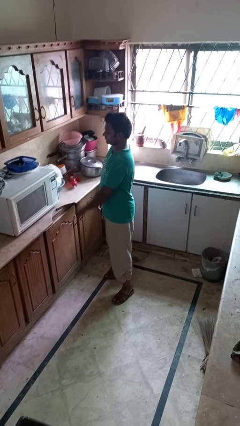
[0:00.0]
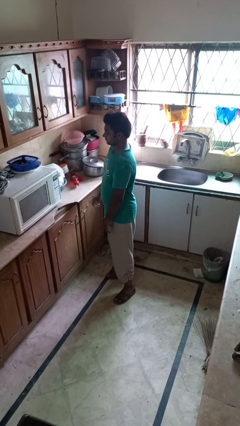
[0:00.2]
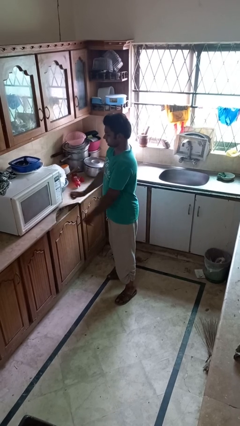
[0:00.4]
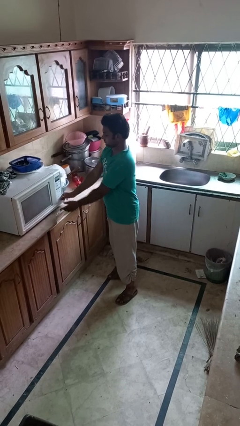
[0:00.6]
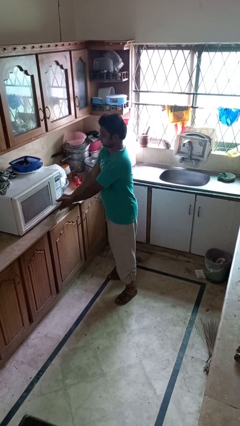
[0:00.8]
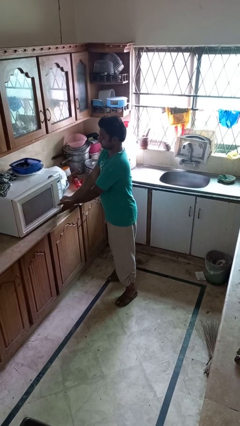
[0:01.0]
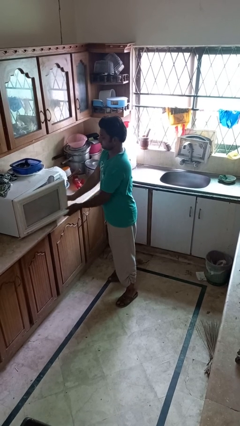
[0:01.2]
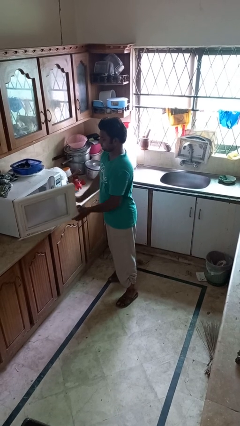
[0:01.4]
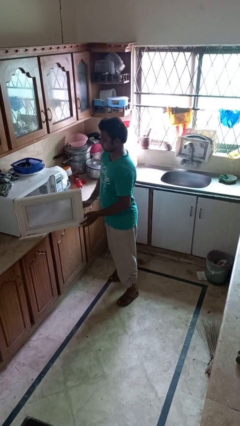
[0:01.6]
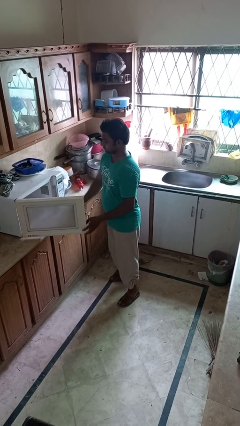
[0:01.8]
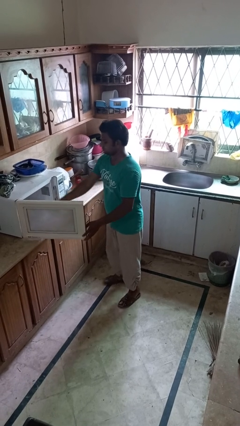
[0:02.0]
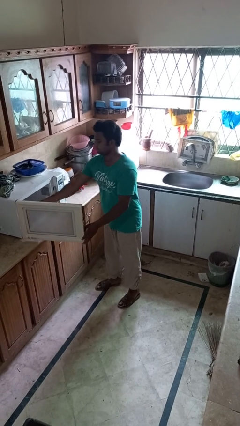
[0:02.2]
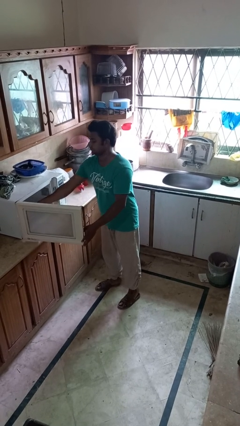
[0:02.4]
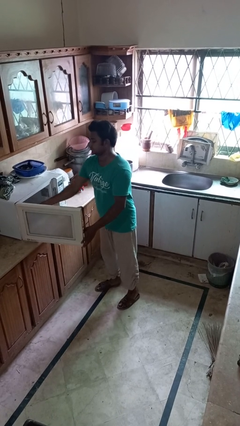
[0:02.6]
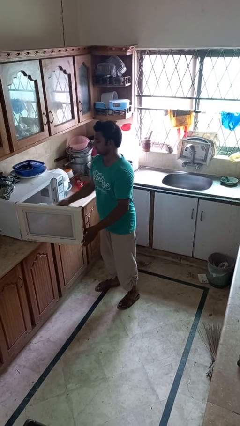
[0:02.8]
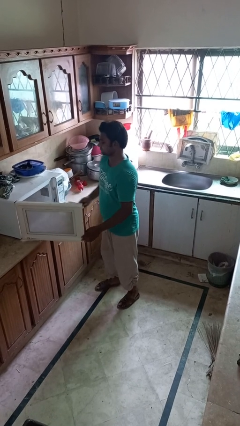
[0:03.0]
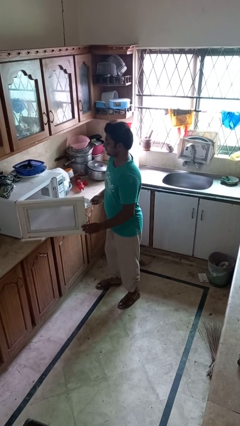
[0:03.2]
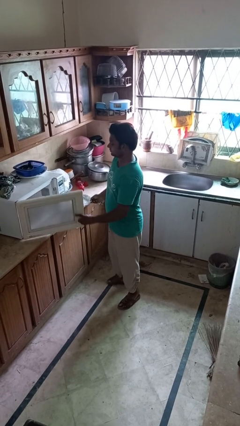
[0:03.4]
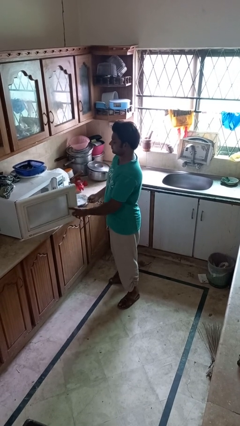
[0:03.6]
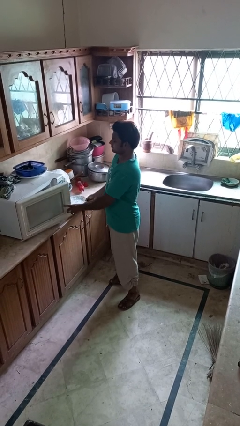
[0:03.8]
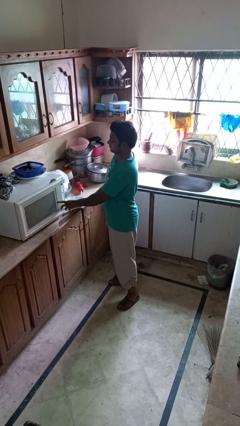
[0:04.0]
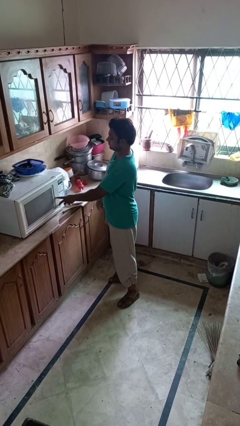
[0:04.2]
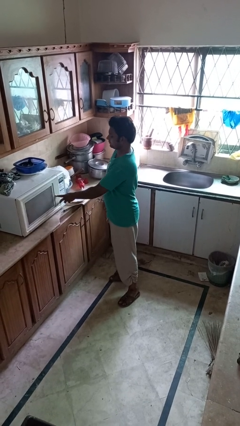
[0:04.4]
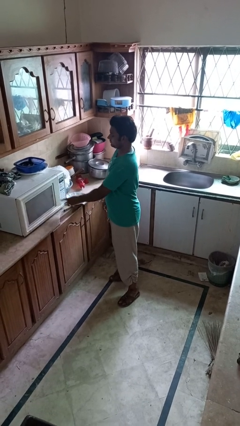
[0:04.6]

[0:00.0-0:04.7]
person takes object from microwave

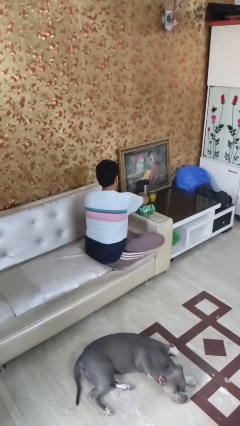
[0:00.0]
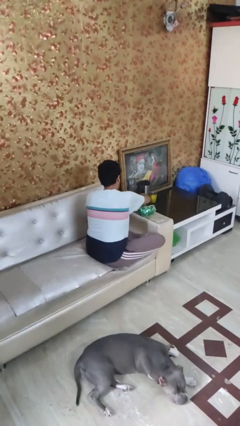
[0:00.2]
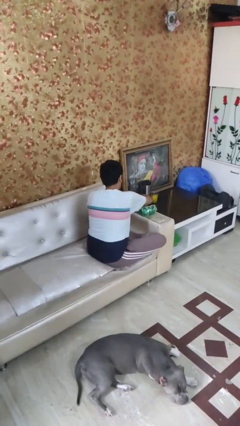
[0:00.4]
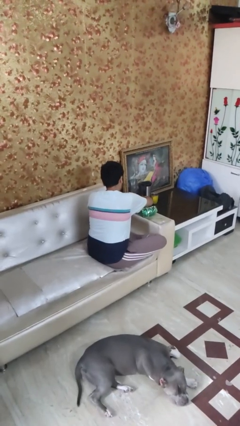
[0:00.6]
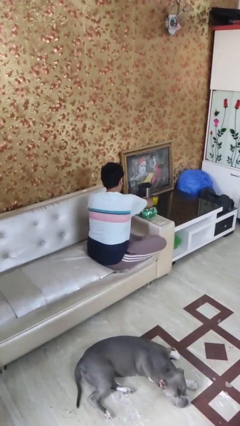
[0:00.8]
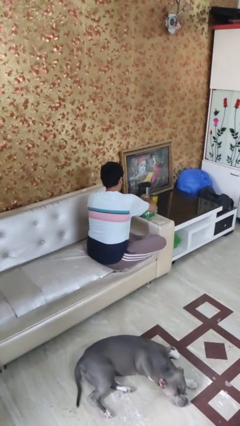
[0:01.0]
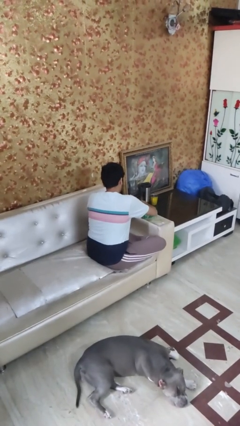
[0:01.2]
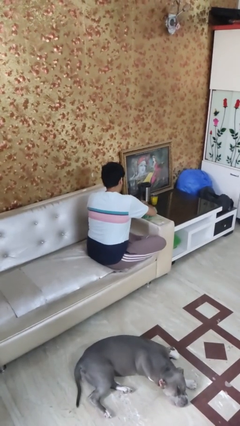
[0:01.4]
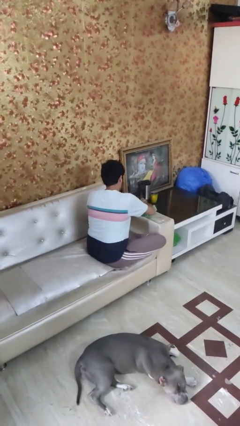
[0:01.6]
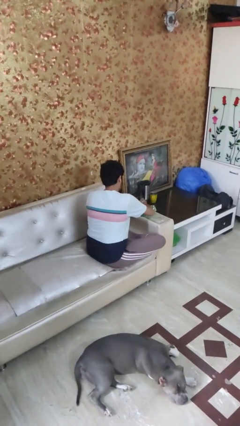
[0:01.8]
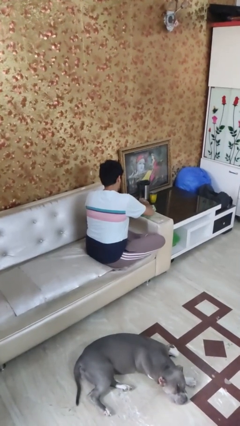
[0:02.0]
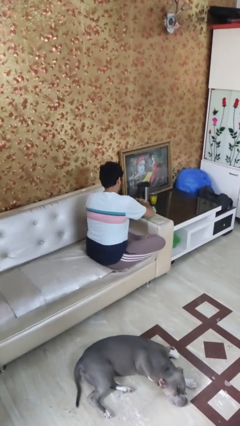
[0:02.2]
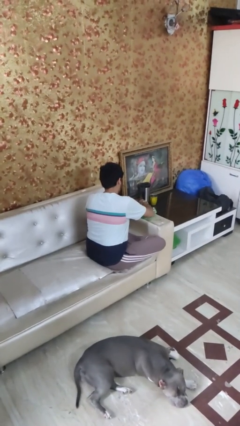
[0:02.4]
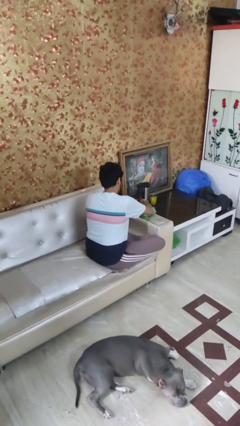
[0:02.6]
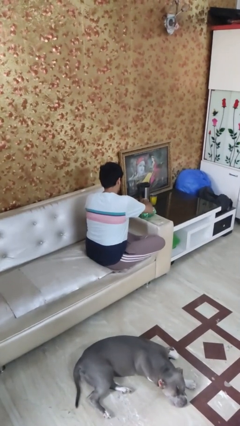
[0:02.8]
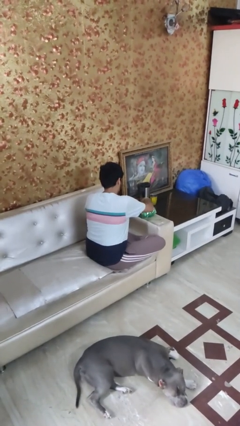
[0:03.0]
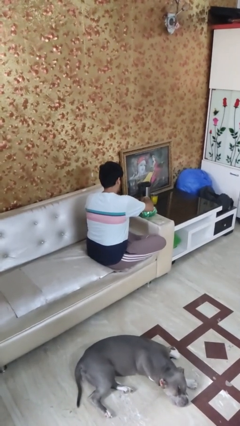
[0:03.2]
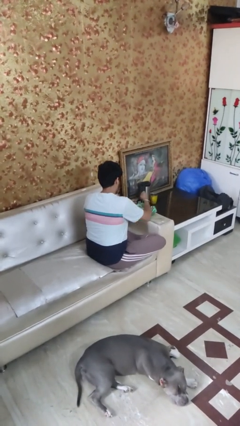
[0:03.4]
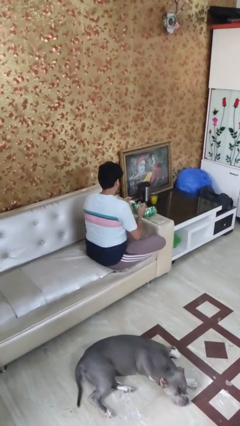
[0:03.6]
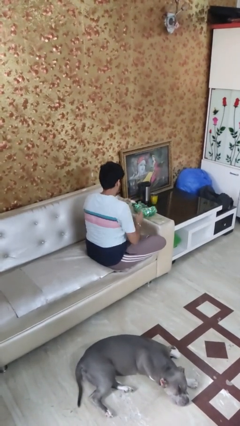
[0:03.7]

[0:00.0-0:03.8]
person wraps box

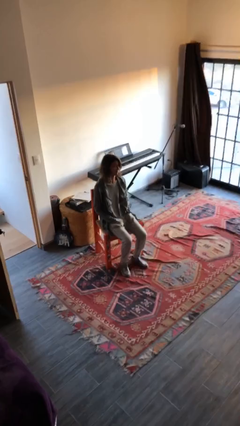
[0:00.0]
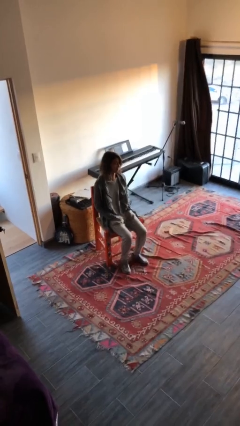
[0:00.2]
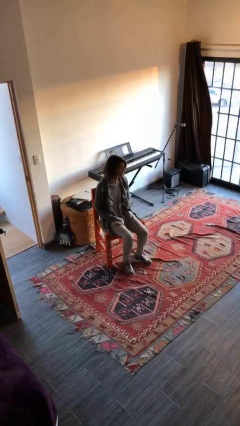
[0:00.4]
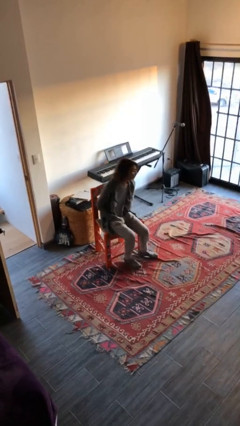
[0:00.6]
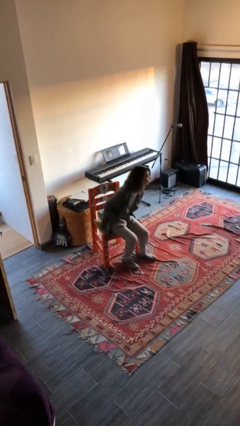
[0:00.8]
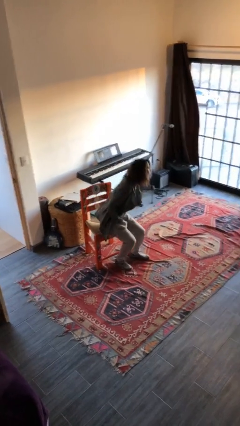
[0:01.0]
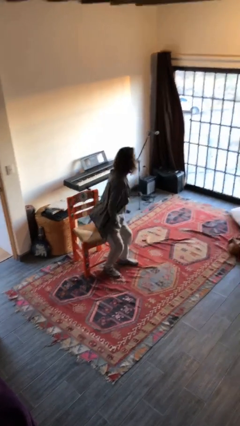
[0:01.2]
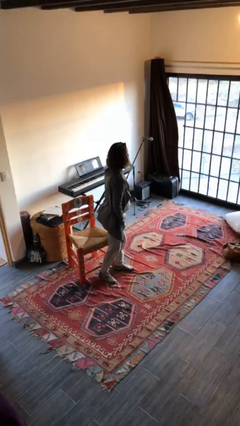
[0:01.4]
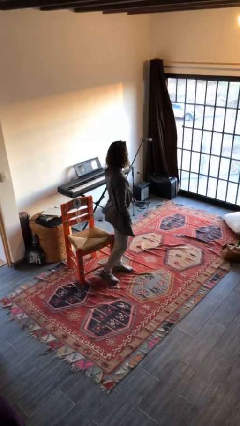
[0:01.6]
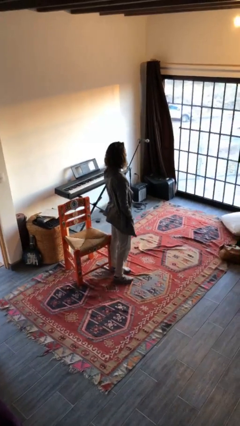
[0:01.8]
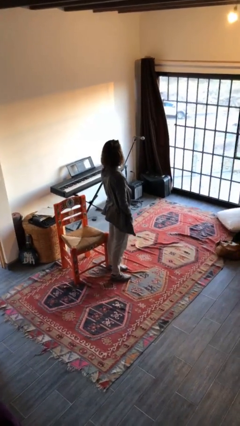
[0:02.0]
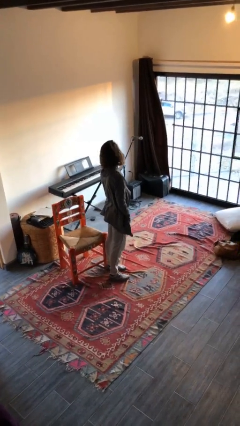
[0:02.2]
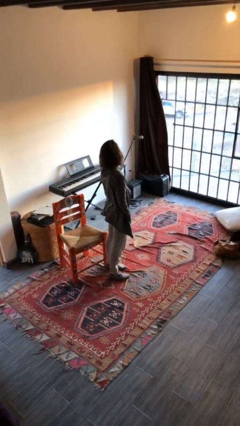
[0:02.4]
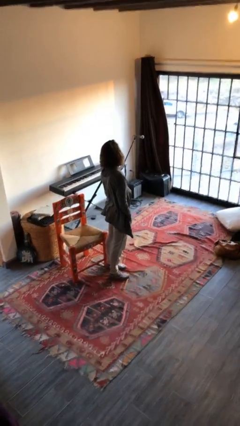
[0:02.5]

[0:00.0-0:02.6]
person stands up

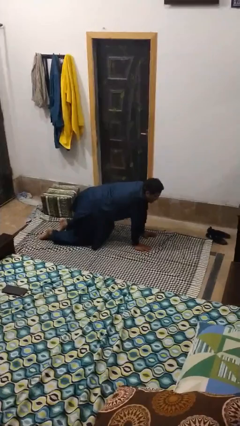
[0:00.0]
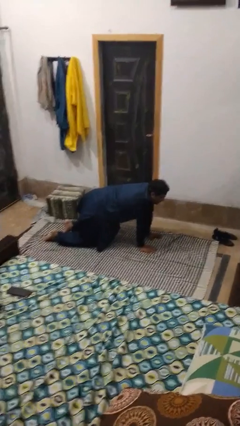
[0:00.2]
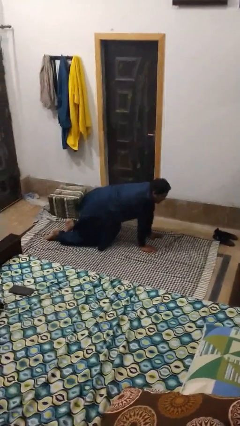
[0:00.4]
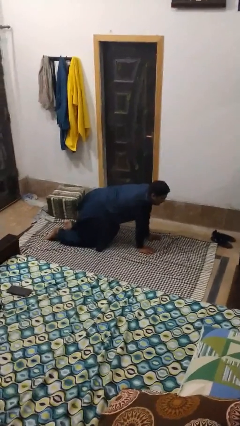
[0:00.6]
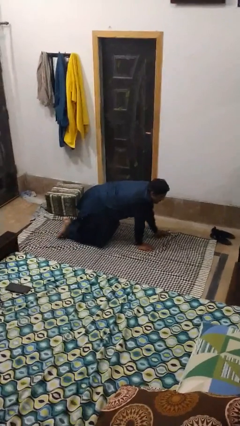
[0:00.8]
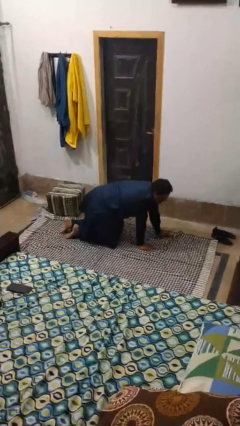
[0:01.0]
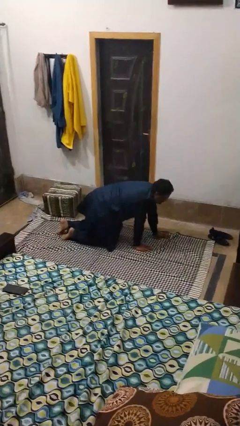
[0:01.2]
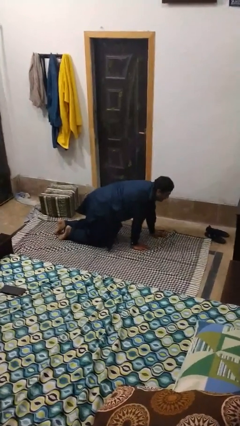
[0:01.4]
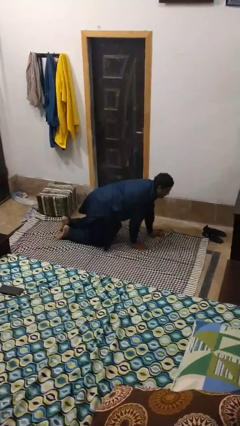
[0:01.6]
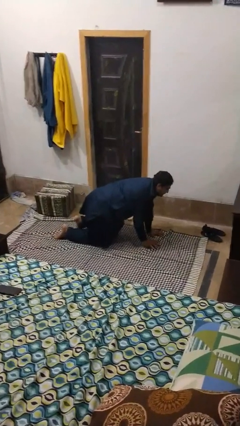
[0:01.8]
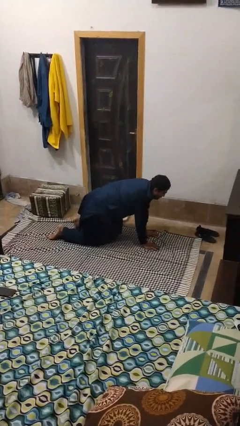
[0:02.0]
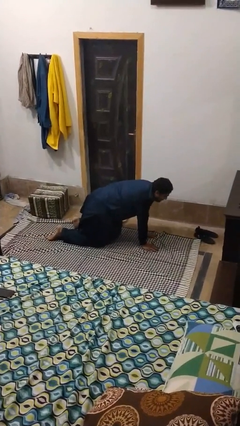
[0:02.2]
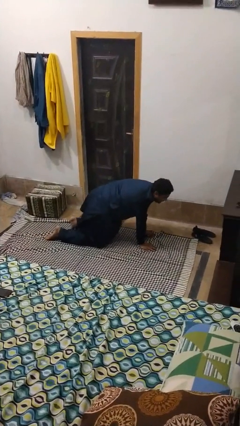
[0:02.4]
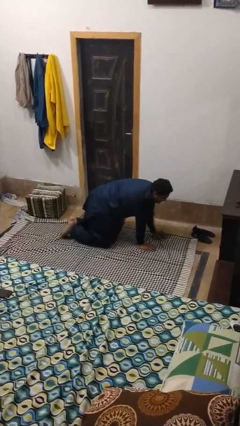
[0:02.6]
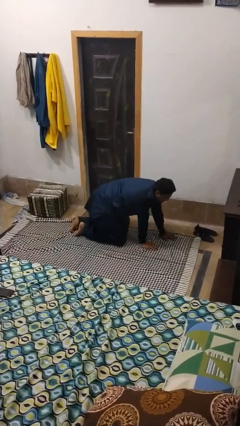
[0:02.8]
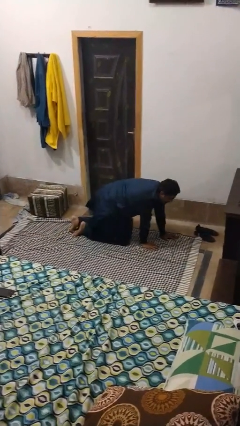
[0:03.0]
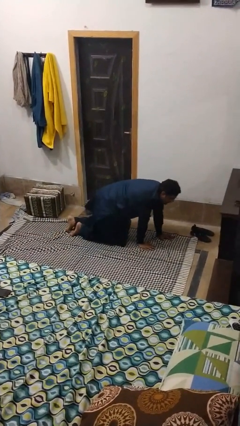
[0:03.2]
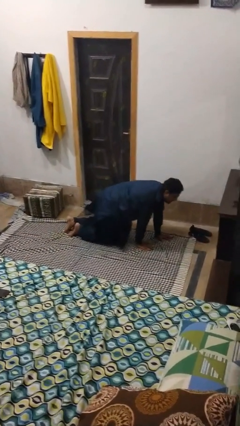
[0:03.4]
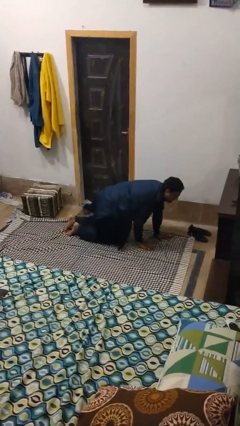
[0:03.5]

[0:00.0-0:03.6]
person crawls

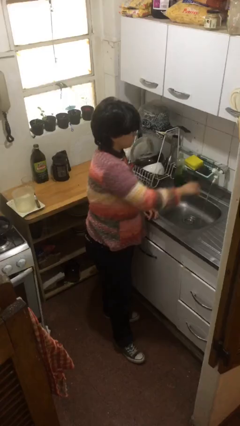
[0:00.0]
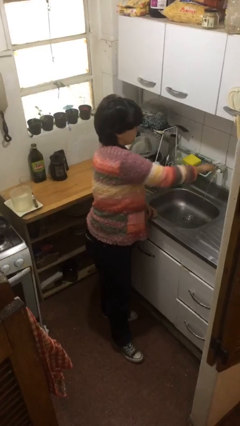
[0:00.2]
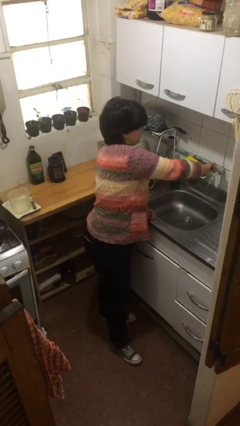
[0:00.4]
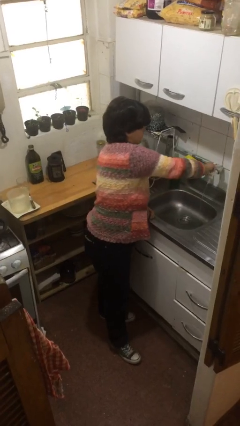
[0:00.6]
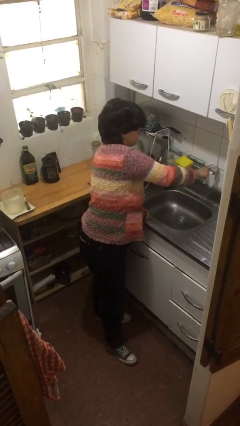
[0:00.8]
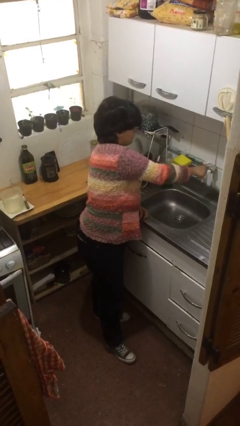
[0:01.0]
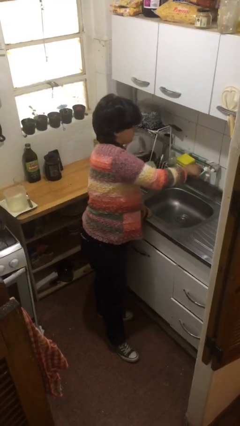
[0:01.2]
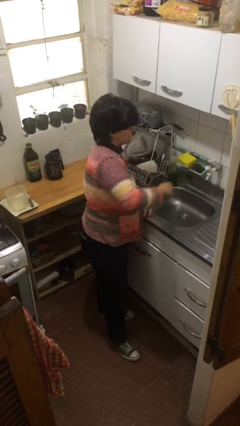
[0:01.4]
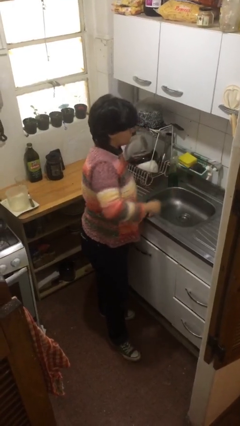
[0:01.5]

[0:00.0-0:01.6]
person turns off faucet

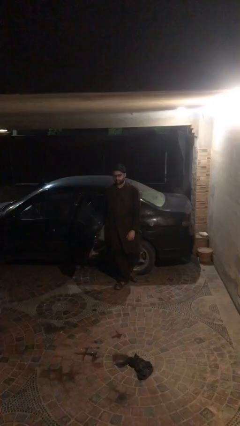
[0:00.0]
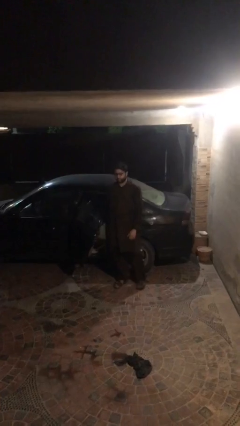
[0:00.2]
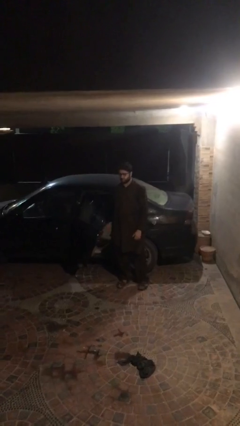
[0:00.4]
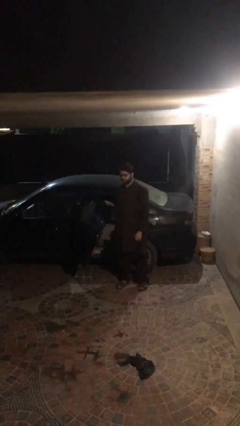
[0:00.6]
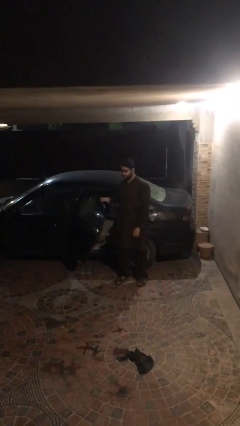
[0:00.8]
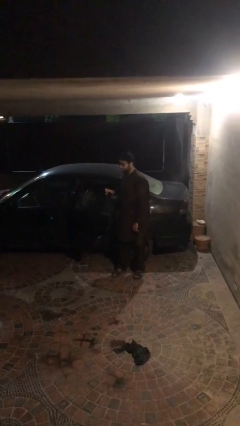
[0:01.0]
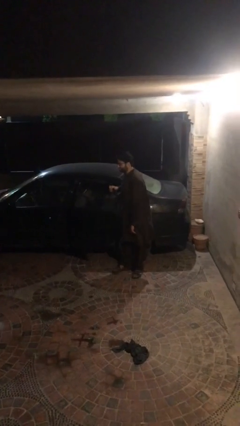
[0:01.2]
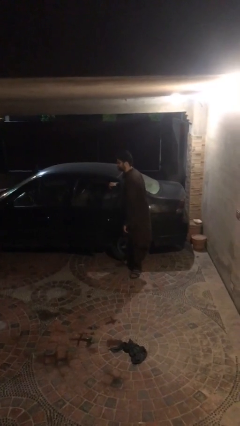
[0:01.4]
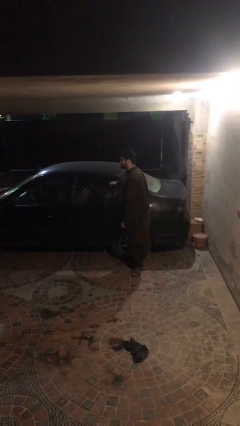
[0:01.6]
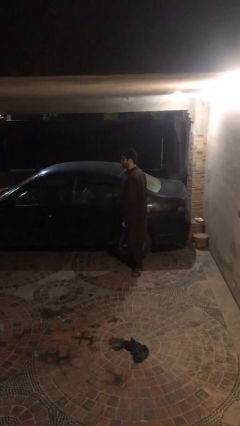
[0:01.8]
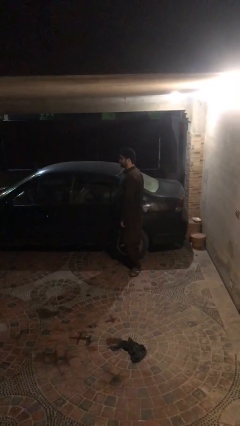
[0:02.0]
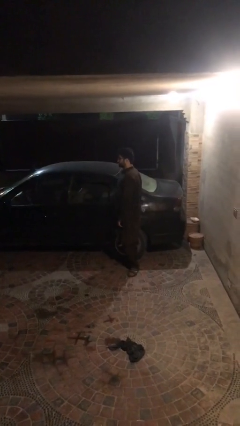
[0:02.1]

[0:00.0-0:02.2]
person closes car door
